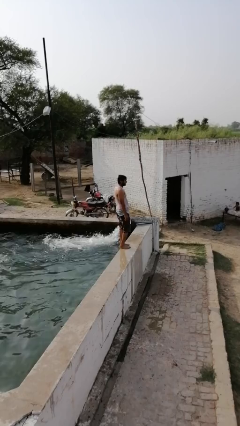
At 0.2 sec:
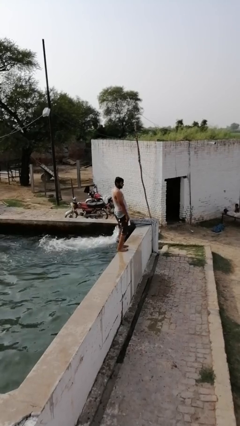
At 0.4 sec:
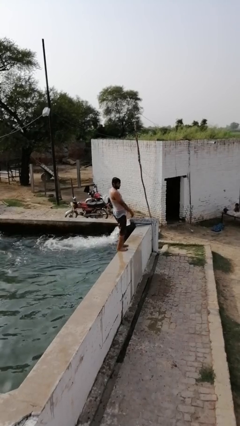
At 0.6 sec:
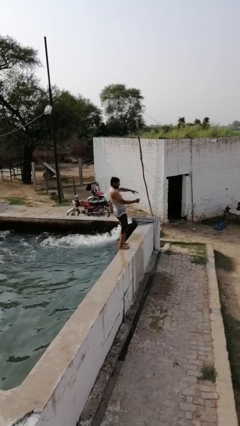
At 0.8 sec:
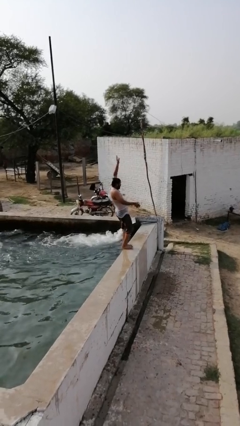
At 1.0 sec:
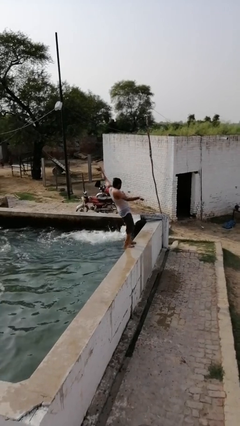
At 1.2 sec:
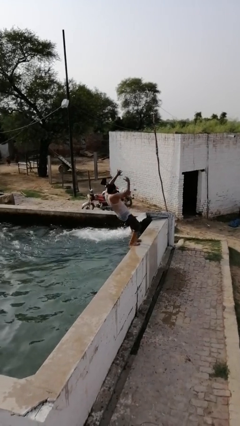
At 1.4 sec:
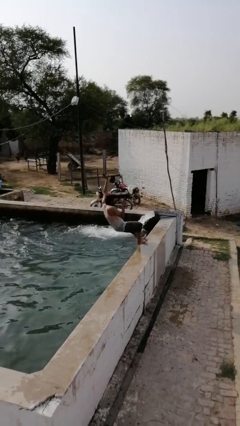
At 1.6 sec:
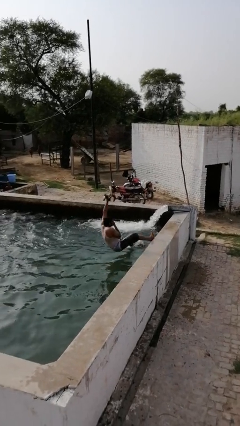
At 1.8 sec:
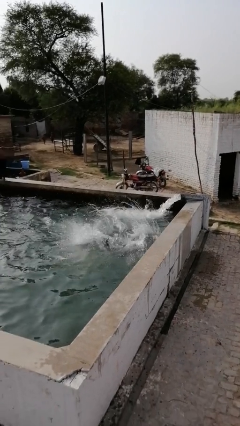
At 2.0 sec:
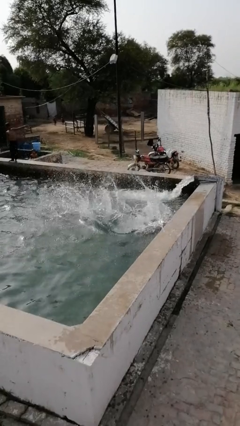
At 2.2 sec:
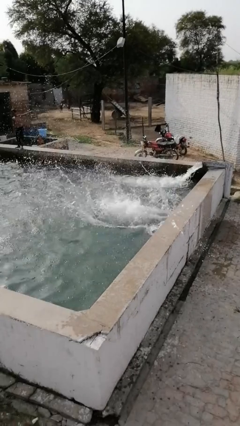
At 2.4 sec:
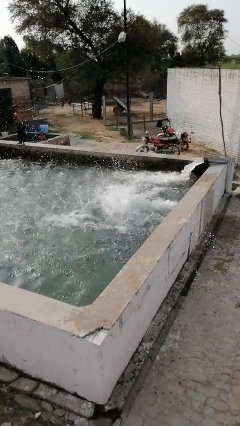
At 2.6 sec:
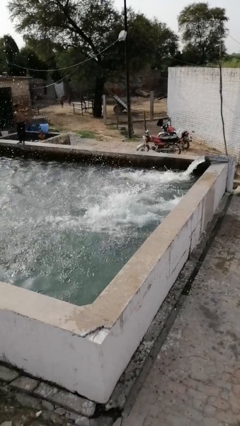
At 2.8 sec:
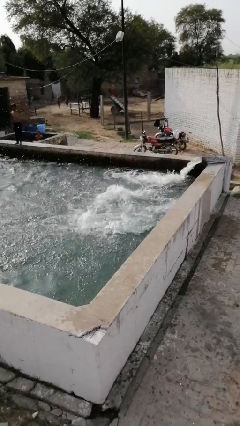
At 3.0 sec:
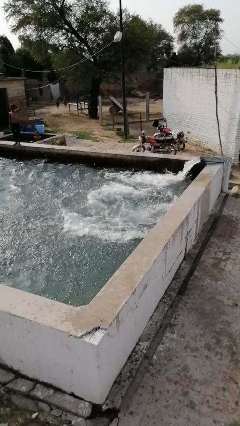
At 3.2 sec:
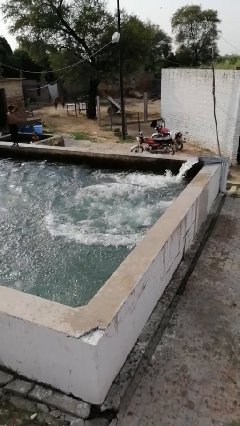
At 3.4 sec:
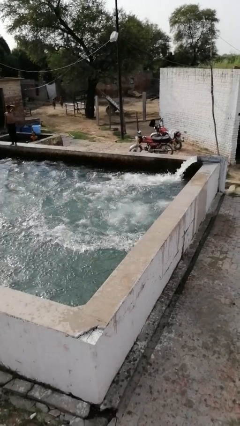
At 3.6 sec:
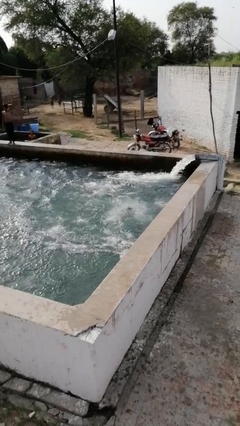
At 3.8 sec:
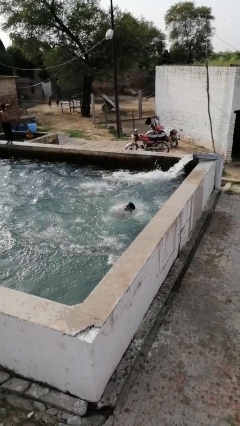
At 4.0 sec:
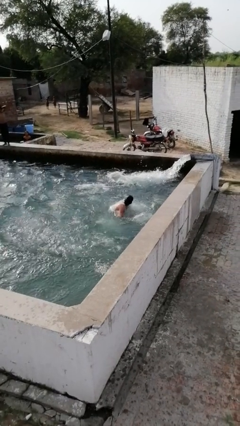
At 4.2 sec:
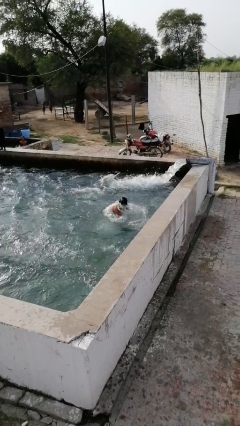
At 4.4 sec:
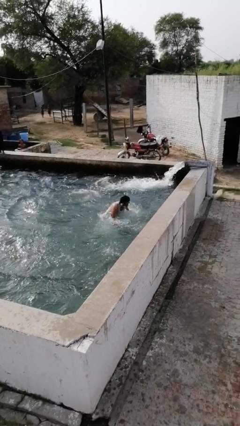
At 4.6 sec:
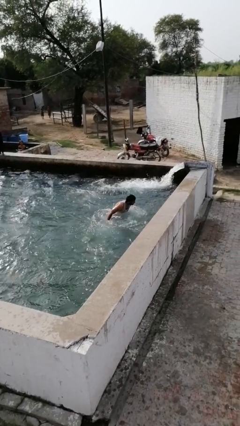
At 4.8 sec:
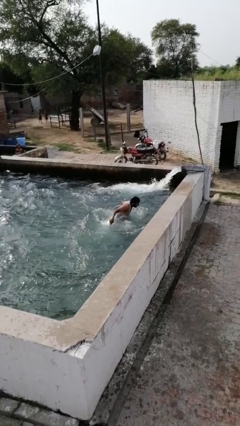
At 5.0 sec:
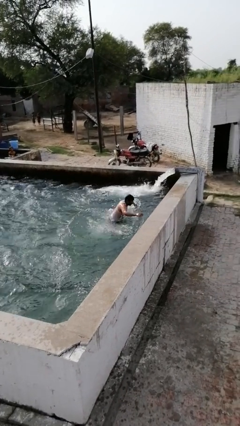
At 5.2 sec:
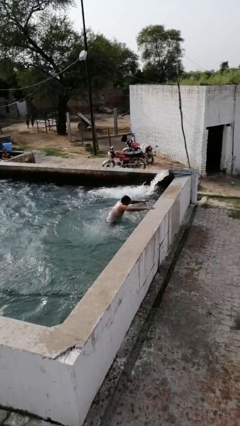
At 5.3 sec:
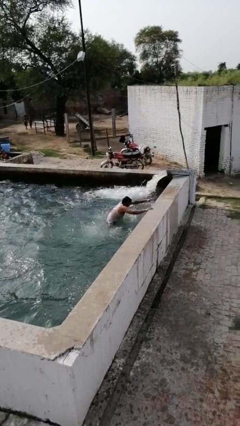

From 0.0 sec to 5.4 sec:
person falls into pool

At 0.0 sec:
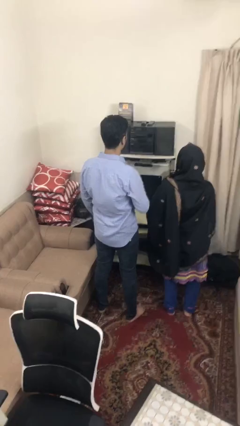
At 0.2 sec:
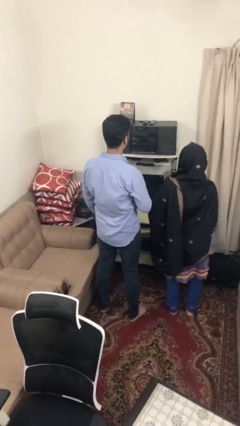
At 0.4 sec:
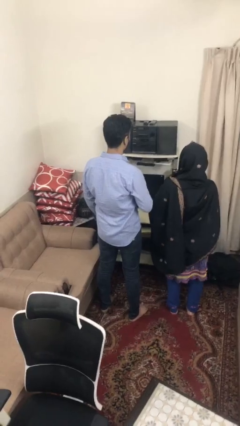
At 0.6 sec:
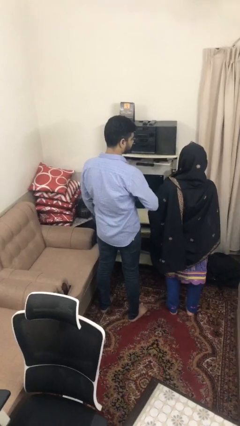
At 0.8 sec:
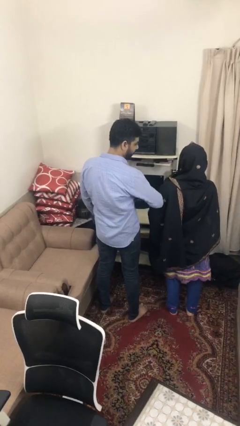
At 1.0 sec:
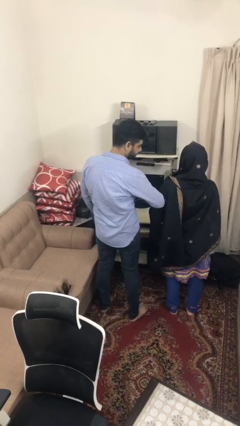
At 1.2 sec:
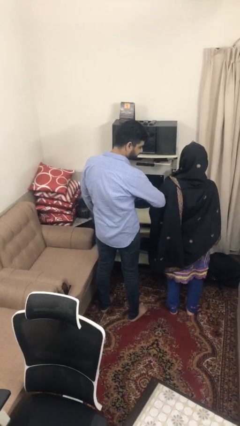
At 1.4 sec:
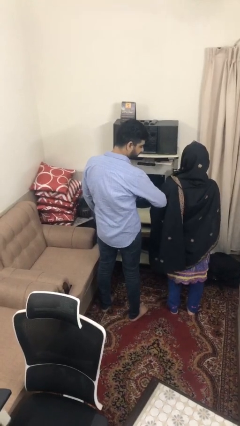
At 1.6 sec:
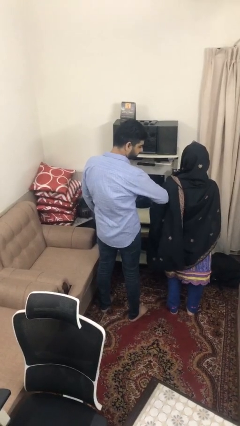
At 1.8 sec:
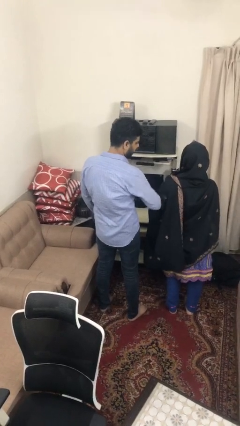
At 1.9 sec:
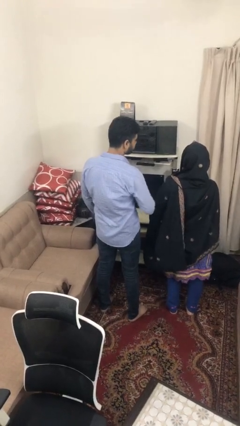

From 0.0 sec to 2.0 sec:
person nudges person with elbow

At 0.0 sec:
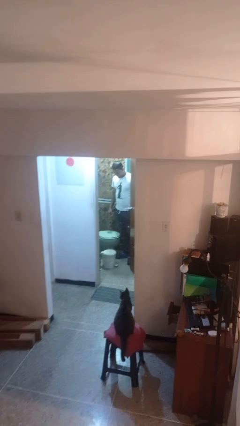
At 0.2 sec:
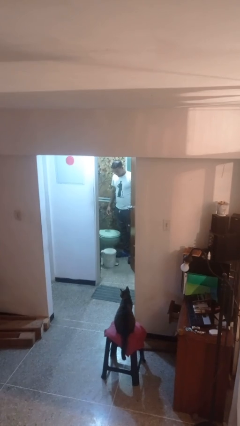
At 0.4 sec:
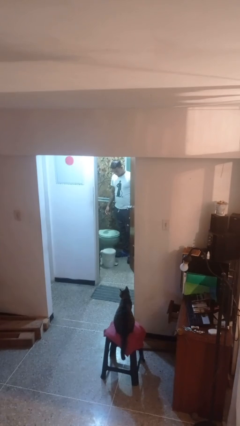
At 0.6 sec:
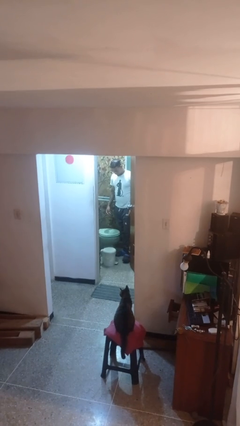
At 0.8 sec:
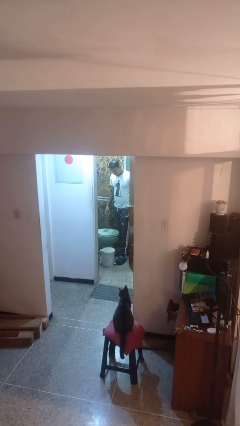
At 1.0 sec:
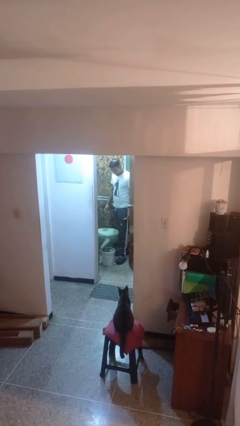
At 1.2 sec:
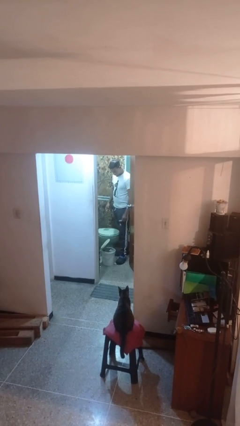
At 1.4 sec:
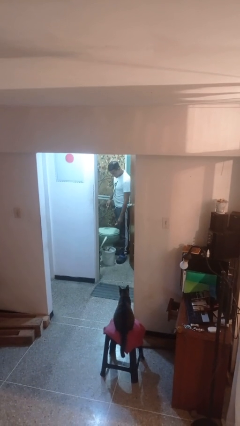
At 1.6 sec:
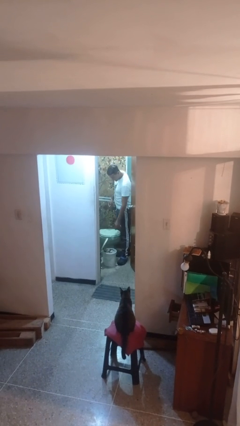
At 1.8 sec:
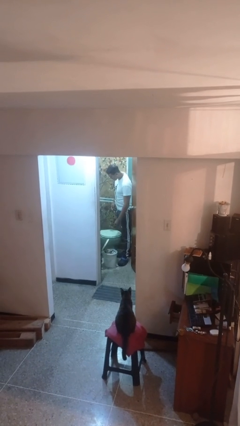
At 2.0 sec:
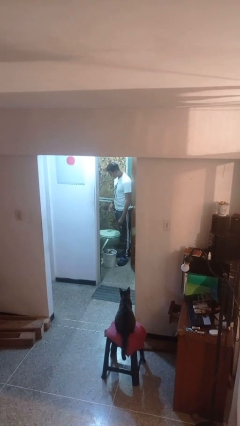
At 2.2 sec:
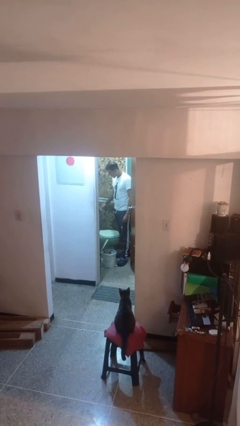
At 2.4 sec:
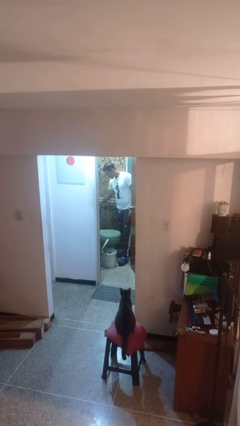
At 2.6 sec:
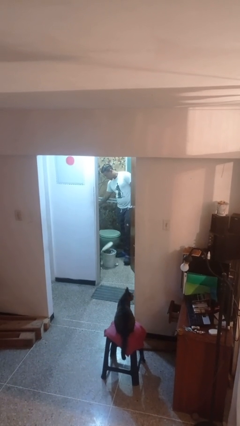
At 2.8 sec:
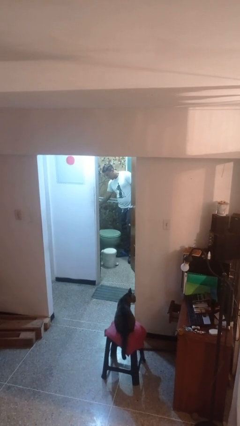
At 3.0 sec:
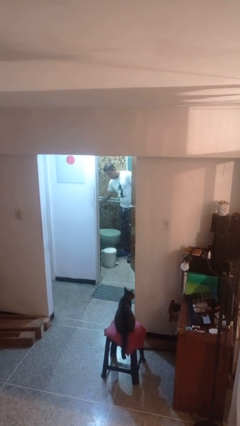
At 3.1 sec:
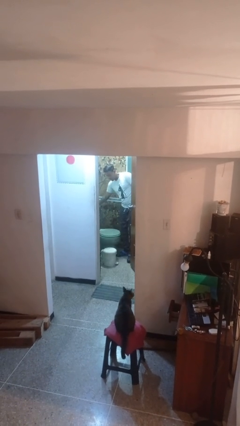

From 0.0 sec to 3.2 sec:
person discards trash

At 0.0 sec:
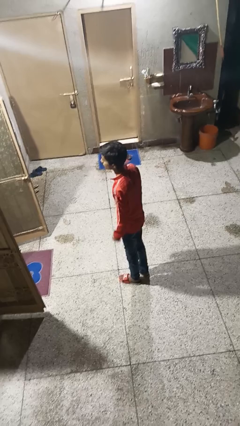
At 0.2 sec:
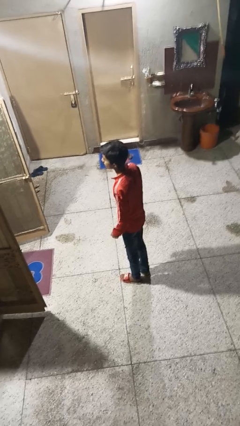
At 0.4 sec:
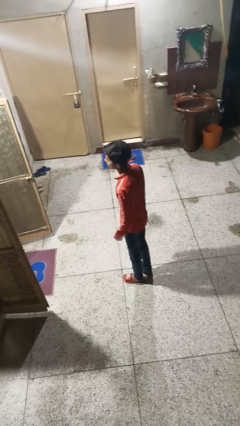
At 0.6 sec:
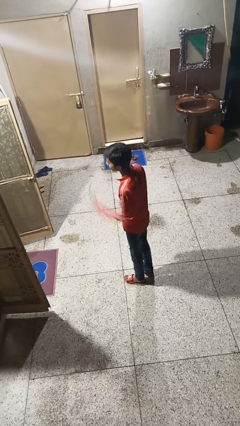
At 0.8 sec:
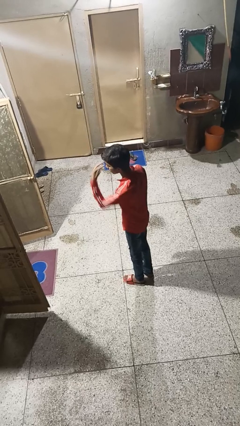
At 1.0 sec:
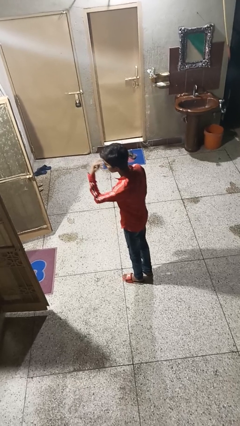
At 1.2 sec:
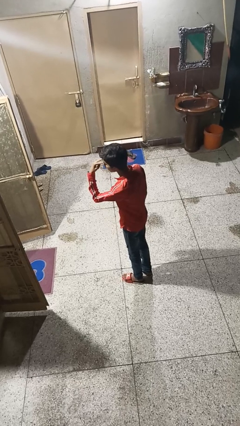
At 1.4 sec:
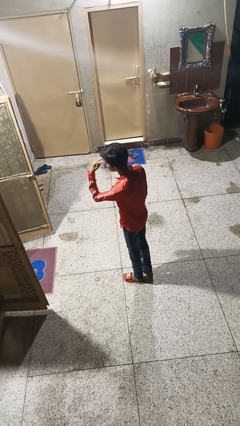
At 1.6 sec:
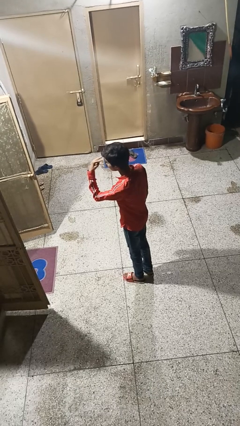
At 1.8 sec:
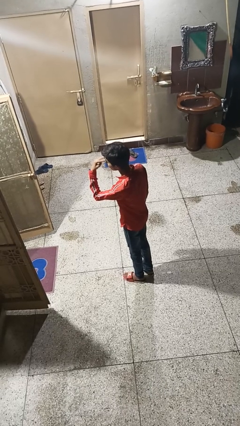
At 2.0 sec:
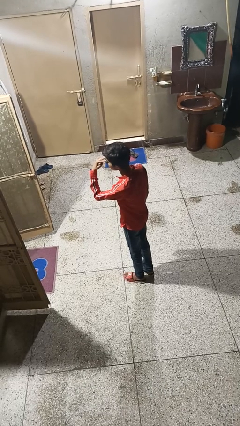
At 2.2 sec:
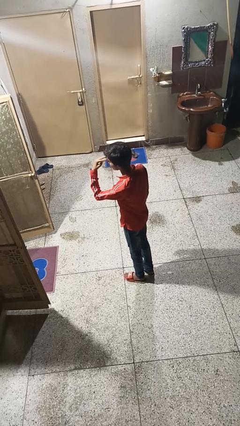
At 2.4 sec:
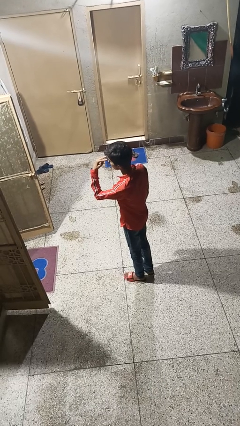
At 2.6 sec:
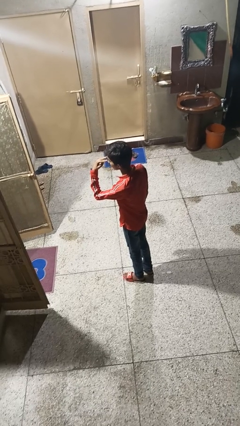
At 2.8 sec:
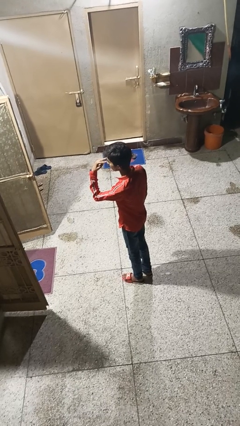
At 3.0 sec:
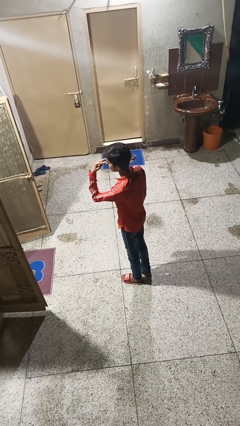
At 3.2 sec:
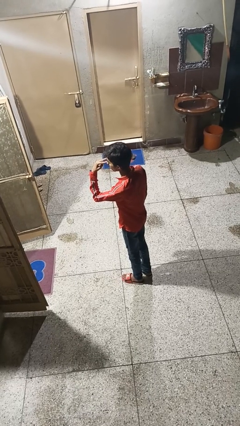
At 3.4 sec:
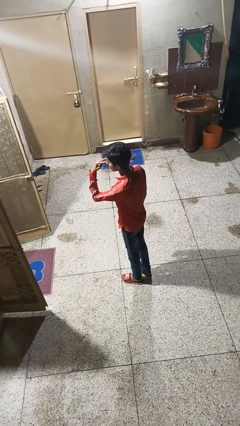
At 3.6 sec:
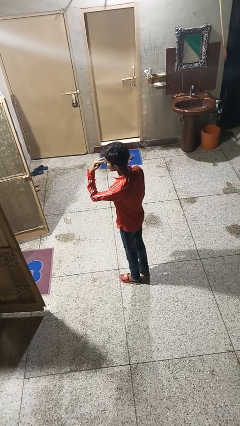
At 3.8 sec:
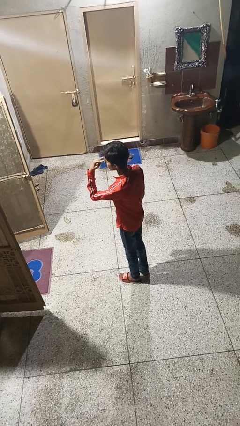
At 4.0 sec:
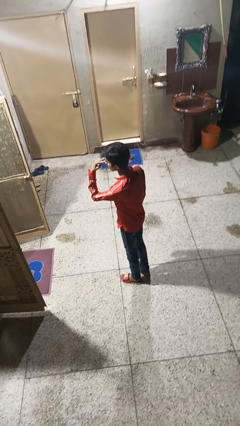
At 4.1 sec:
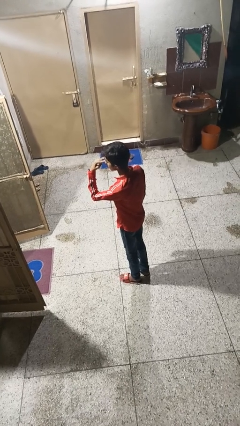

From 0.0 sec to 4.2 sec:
person gestures watch closely

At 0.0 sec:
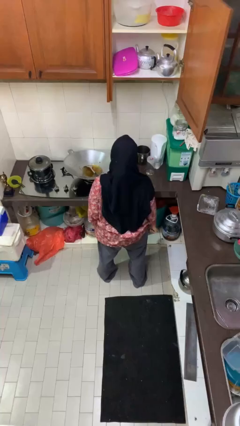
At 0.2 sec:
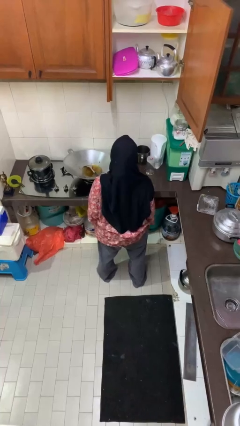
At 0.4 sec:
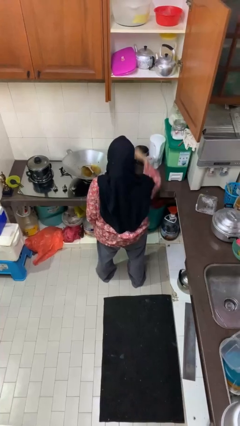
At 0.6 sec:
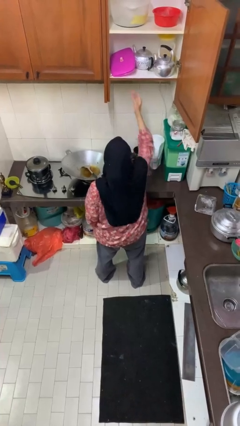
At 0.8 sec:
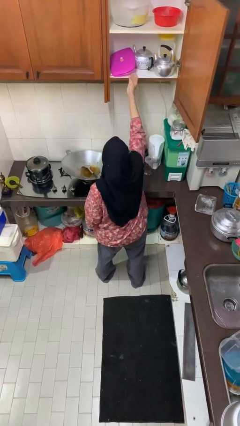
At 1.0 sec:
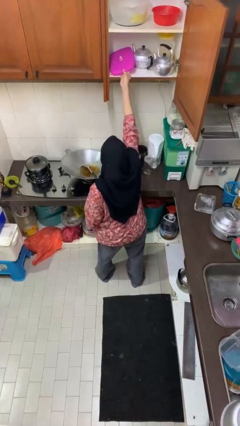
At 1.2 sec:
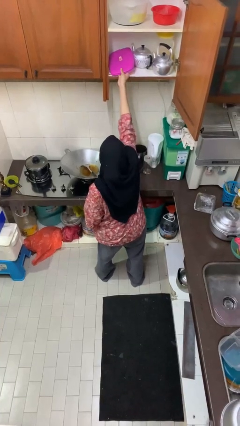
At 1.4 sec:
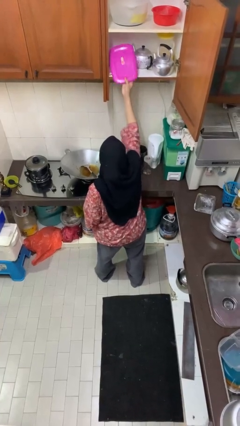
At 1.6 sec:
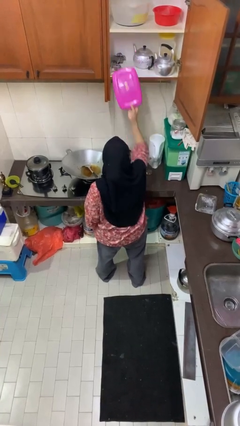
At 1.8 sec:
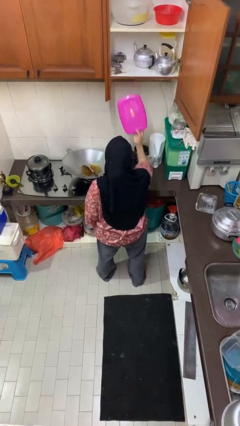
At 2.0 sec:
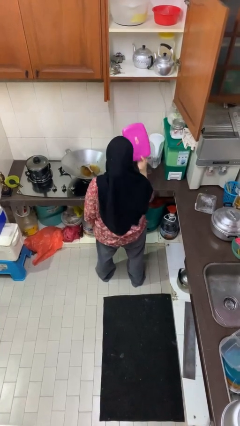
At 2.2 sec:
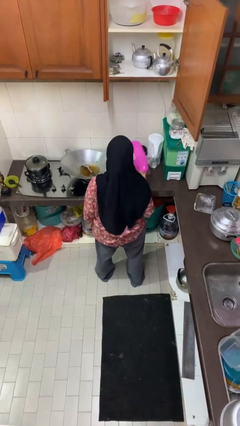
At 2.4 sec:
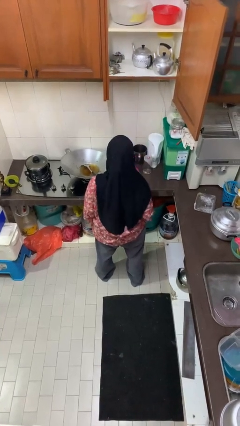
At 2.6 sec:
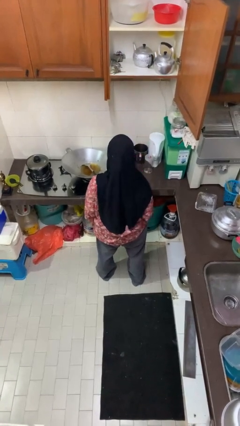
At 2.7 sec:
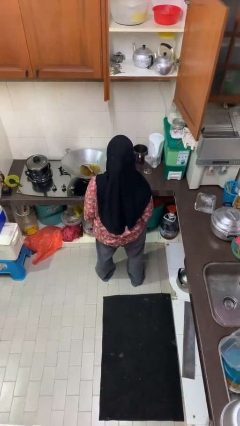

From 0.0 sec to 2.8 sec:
person takes object from cabinet
